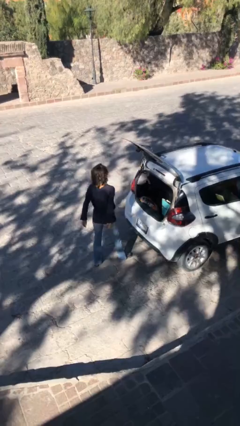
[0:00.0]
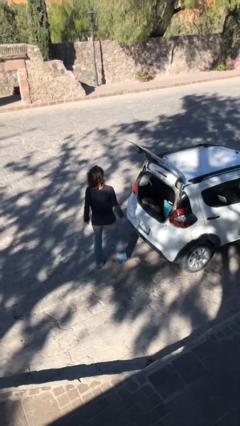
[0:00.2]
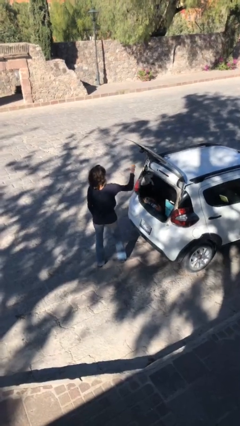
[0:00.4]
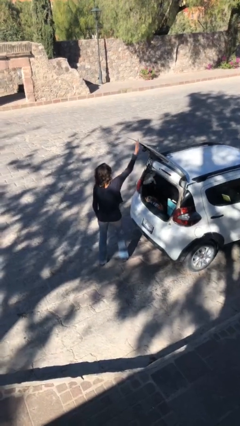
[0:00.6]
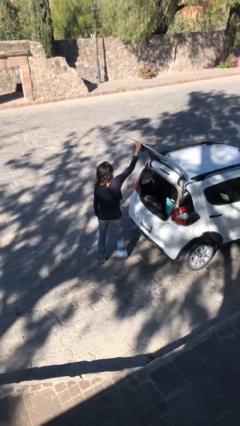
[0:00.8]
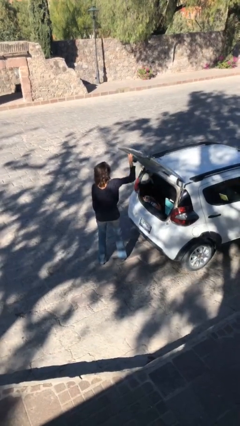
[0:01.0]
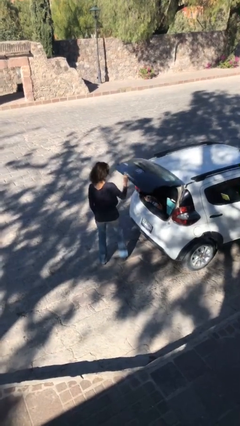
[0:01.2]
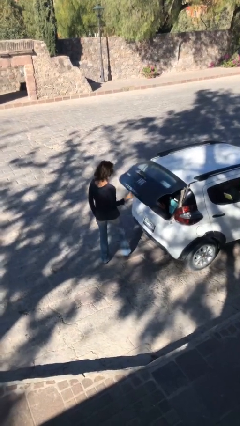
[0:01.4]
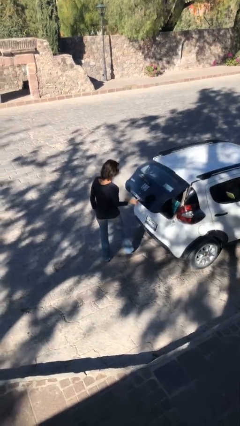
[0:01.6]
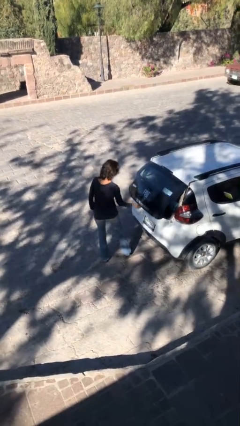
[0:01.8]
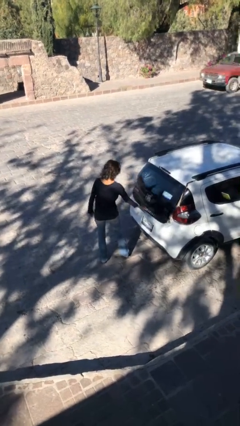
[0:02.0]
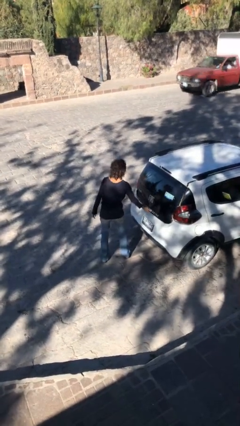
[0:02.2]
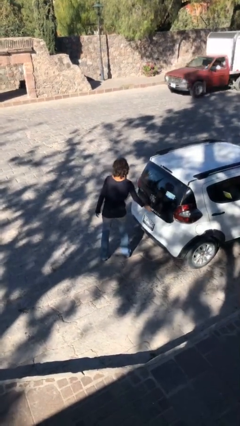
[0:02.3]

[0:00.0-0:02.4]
person closes car trunk

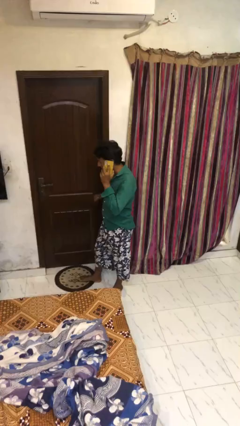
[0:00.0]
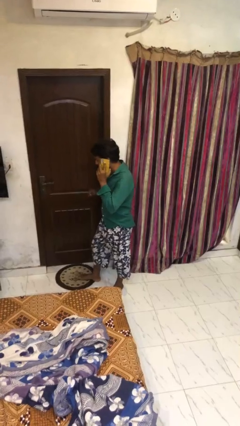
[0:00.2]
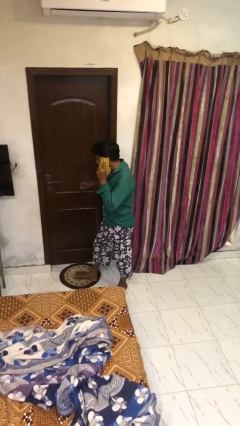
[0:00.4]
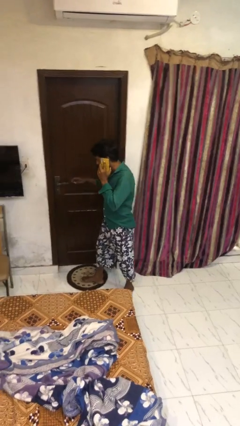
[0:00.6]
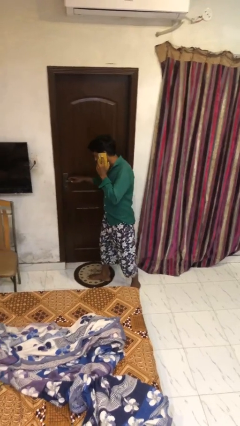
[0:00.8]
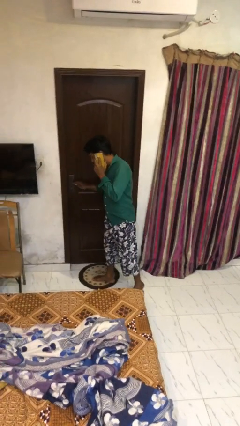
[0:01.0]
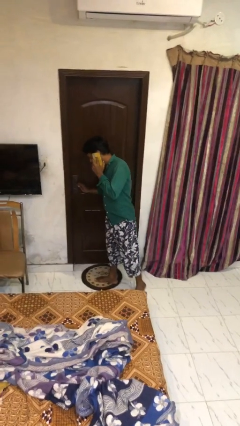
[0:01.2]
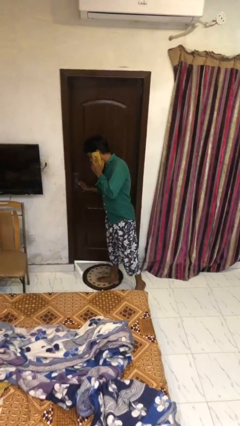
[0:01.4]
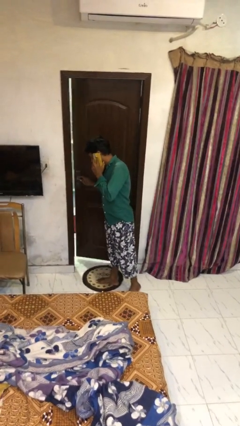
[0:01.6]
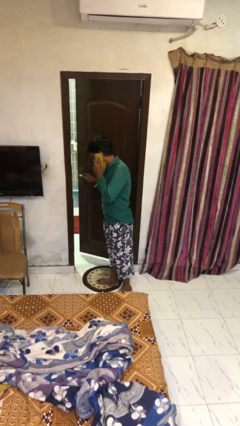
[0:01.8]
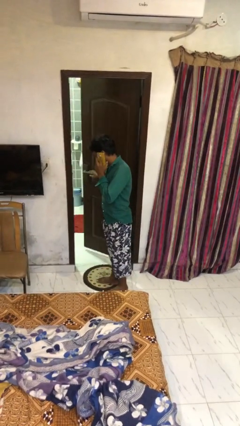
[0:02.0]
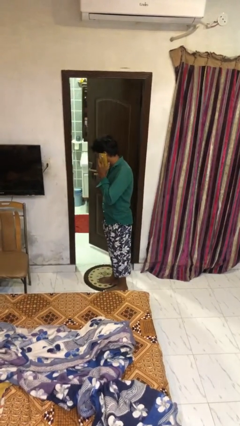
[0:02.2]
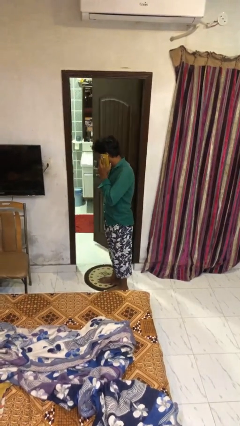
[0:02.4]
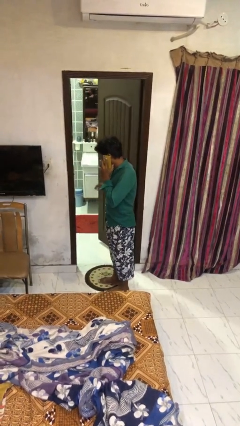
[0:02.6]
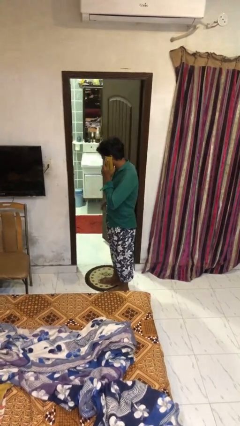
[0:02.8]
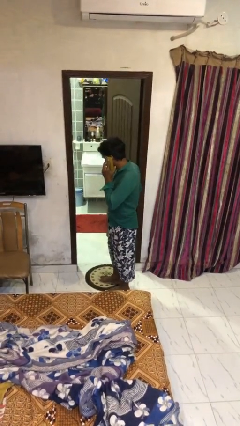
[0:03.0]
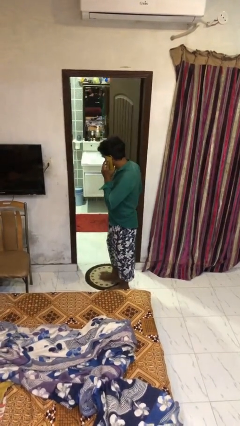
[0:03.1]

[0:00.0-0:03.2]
person opens facility door

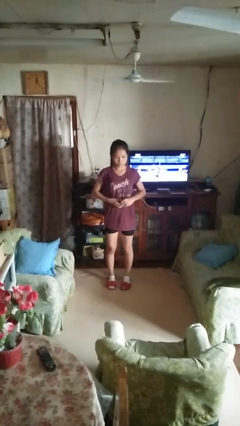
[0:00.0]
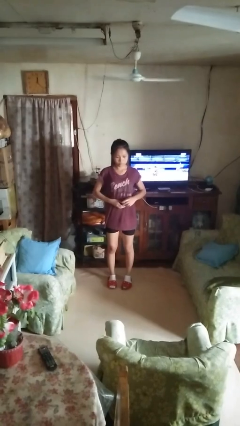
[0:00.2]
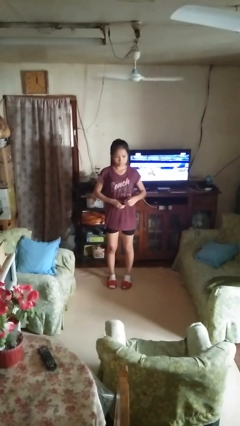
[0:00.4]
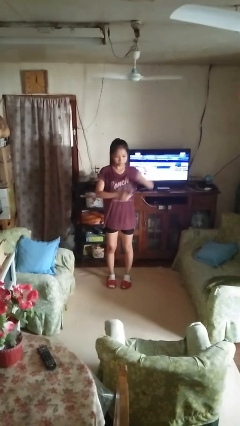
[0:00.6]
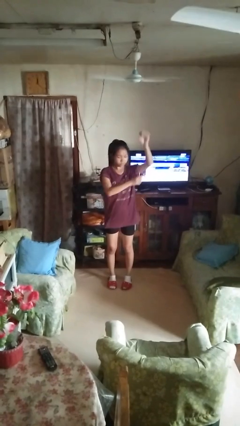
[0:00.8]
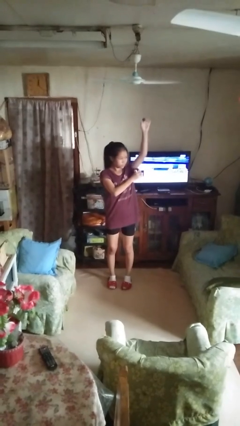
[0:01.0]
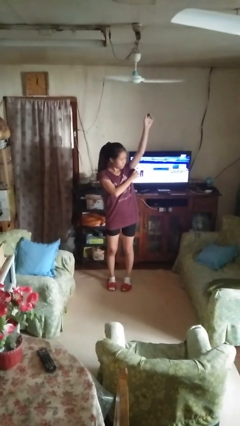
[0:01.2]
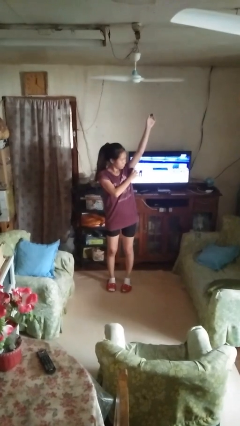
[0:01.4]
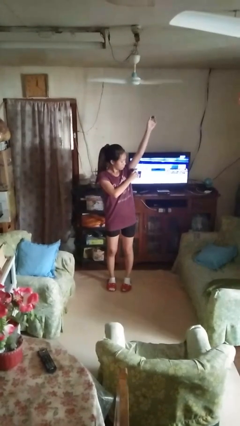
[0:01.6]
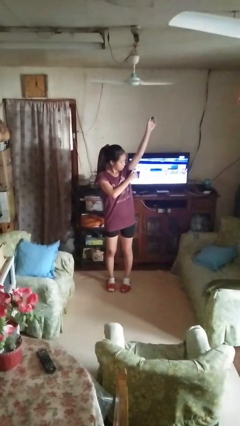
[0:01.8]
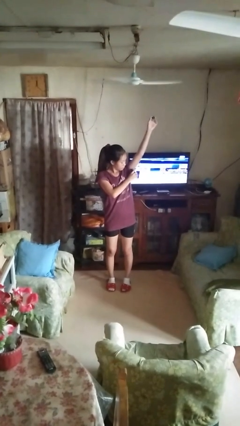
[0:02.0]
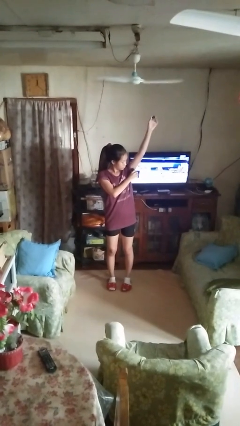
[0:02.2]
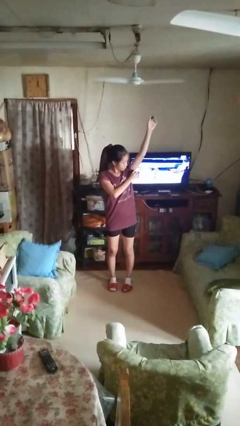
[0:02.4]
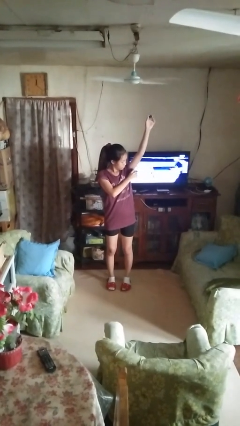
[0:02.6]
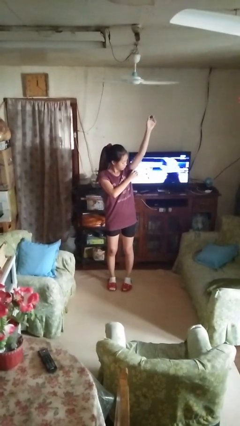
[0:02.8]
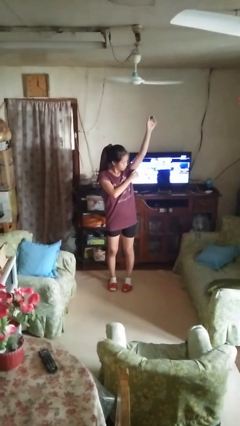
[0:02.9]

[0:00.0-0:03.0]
person applies deodorant

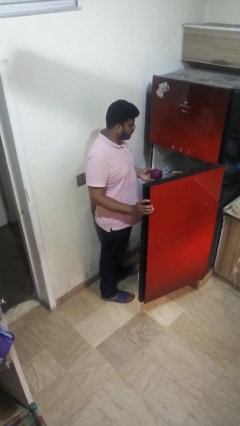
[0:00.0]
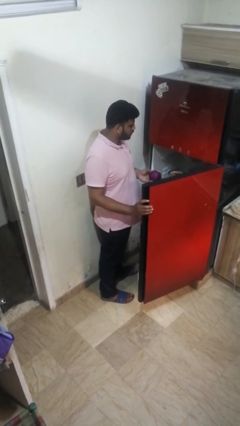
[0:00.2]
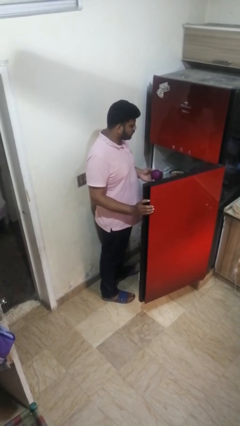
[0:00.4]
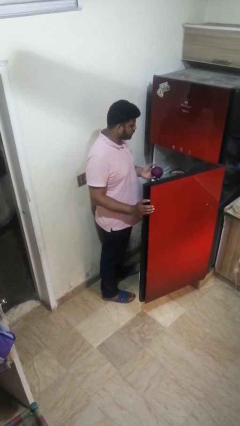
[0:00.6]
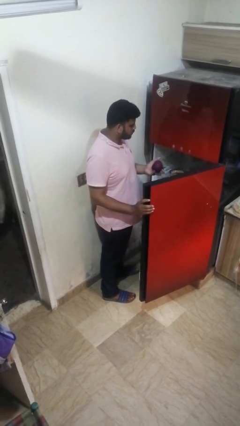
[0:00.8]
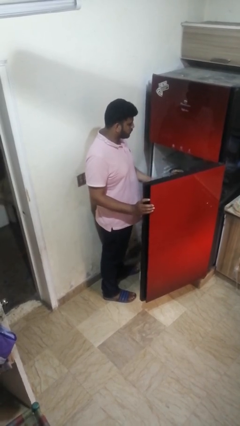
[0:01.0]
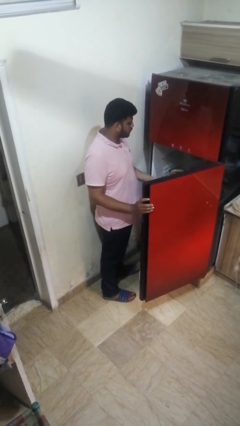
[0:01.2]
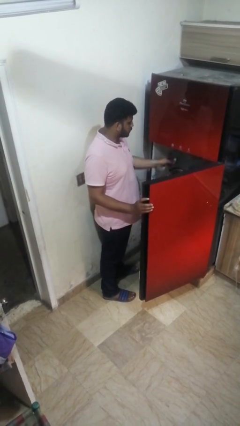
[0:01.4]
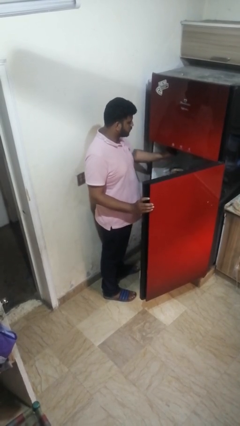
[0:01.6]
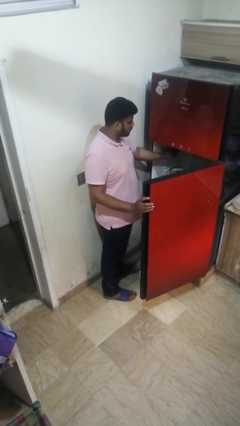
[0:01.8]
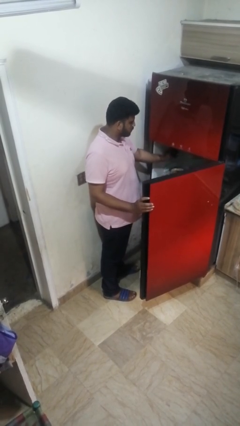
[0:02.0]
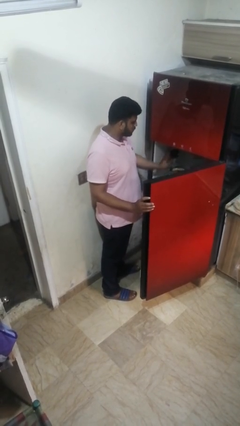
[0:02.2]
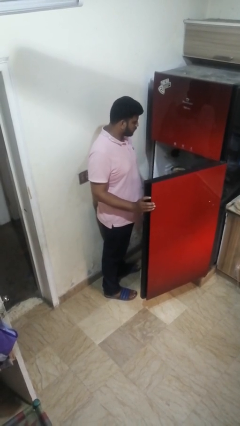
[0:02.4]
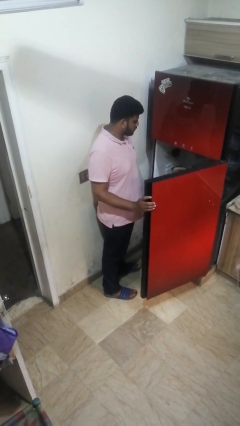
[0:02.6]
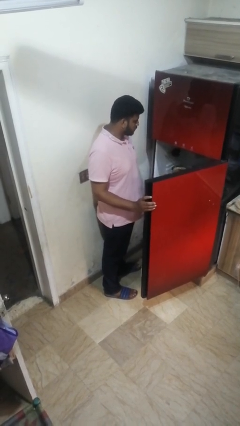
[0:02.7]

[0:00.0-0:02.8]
person puts object into refrigerator

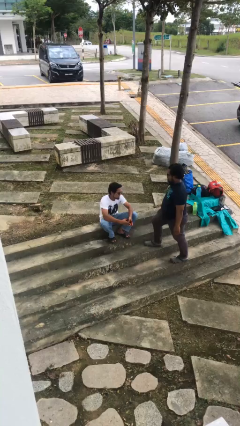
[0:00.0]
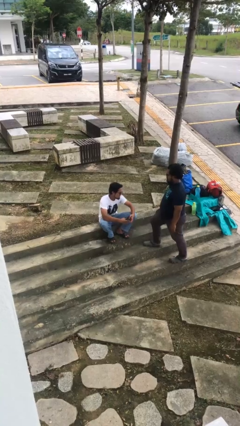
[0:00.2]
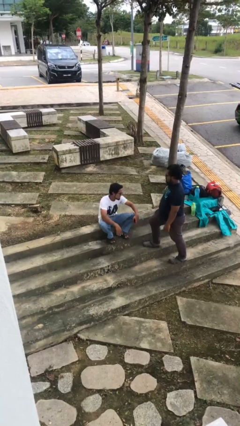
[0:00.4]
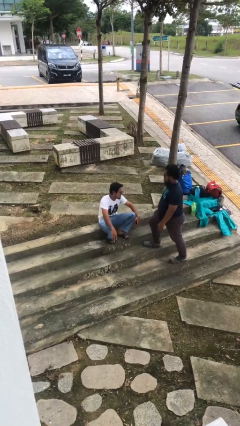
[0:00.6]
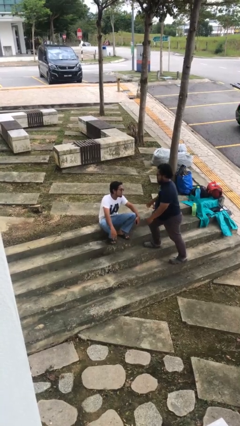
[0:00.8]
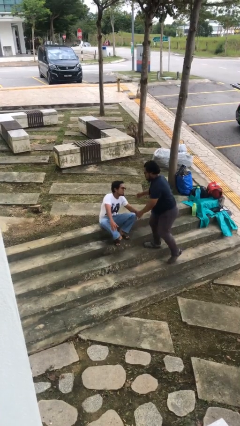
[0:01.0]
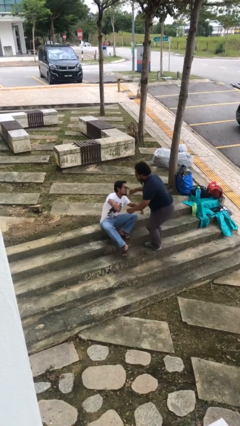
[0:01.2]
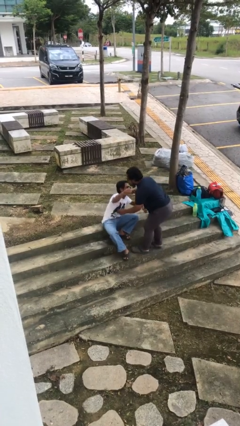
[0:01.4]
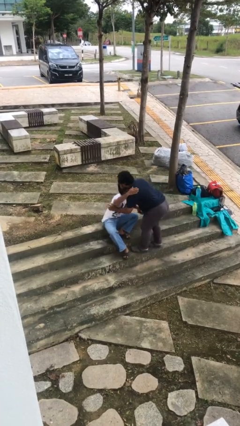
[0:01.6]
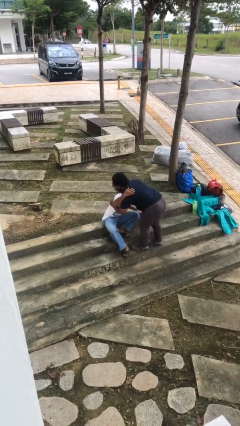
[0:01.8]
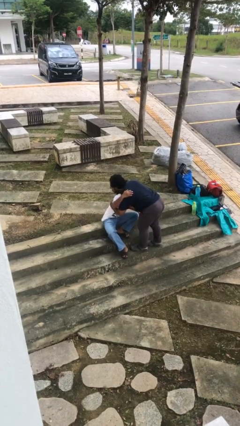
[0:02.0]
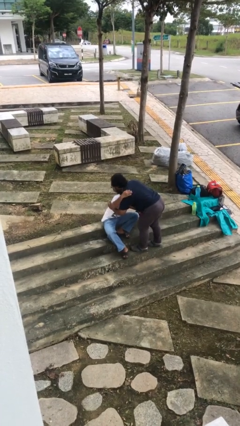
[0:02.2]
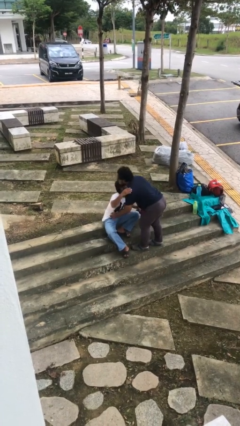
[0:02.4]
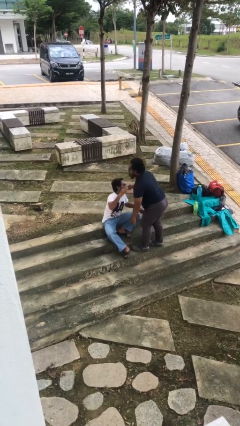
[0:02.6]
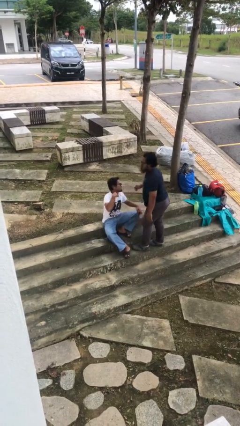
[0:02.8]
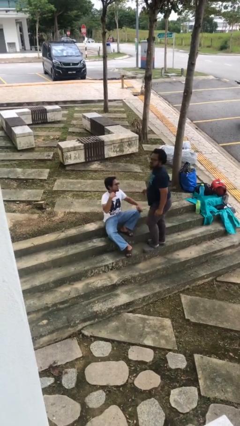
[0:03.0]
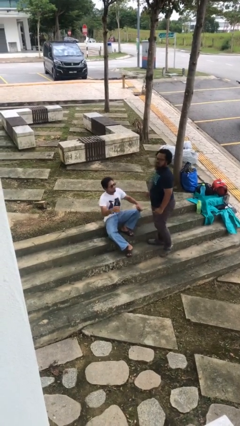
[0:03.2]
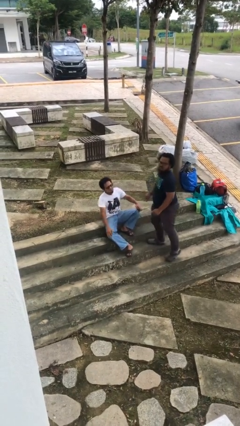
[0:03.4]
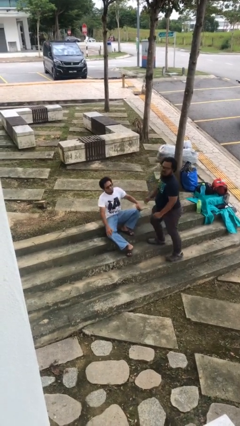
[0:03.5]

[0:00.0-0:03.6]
person embraces person

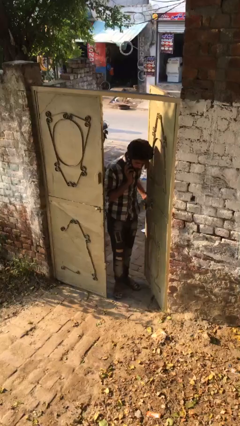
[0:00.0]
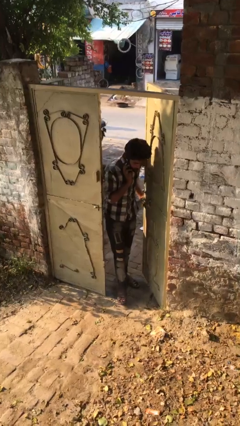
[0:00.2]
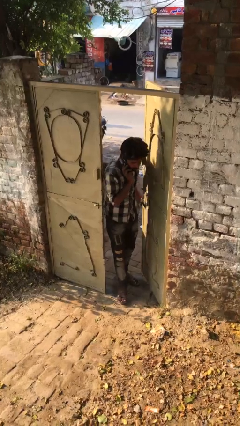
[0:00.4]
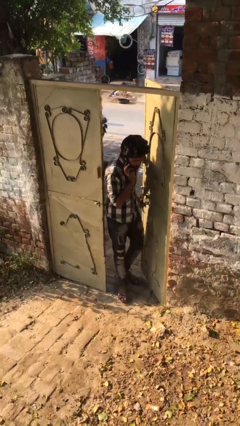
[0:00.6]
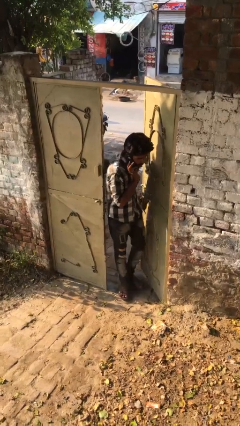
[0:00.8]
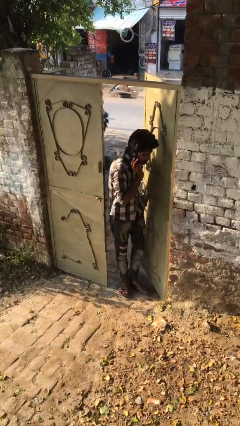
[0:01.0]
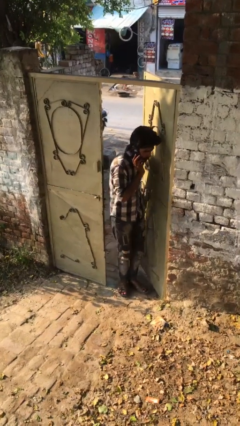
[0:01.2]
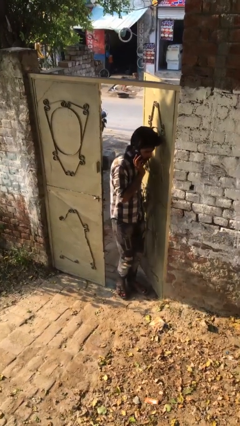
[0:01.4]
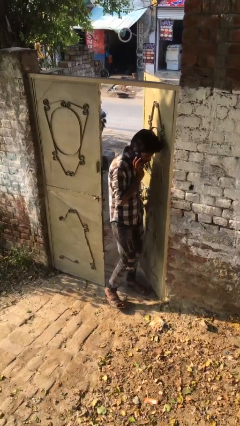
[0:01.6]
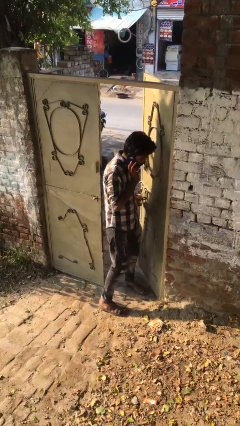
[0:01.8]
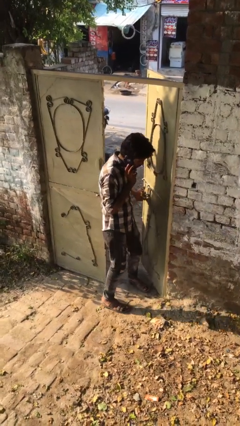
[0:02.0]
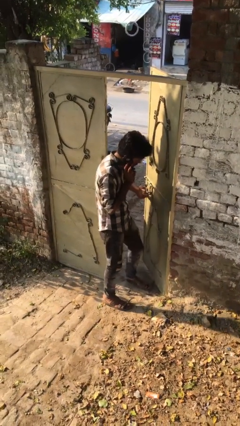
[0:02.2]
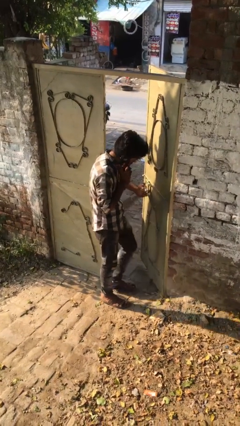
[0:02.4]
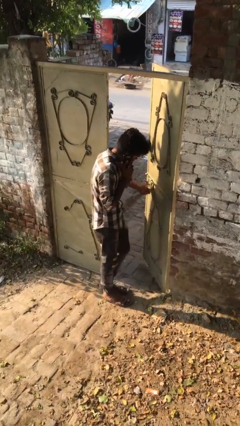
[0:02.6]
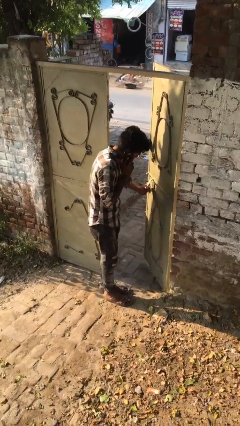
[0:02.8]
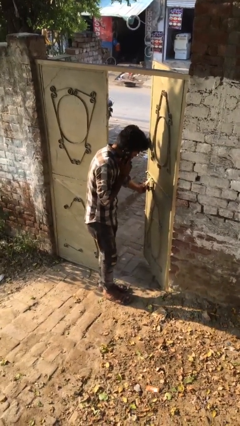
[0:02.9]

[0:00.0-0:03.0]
person enters scene through structure
